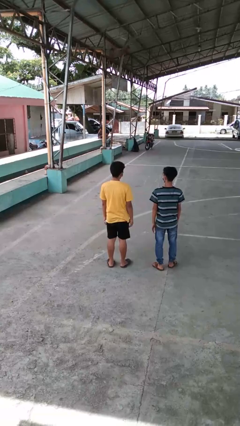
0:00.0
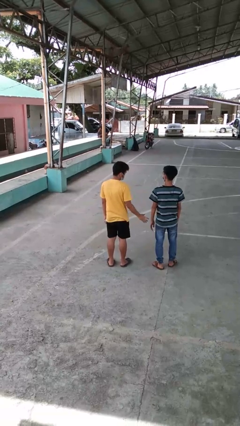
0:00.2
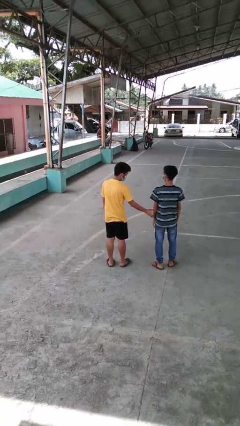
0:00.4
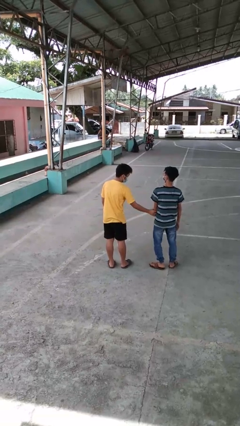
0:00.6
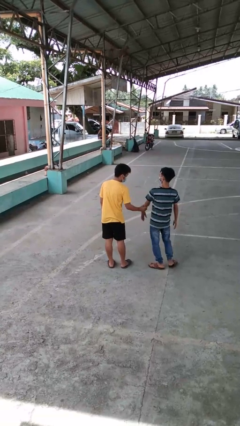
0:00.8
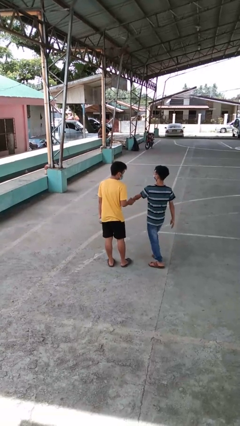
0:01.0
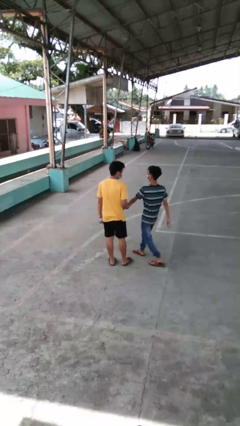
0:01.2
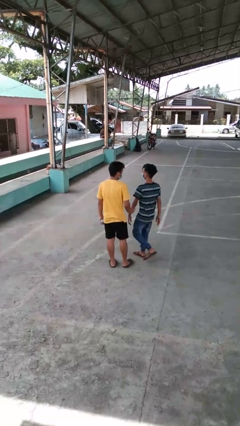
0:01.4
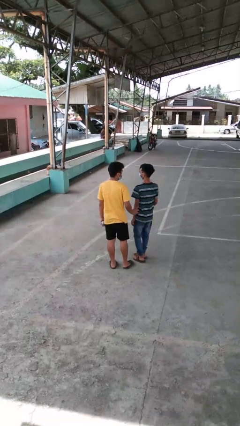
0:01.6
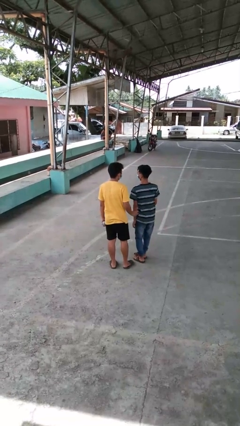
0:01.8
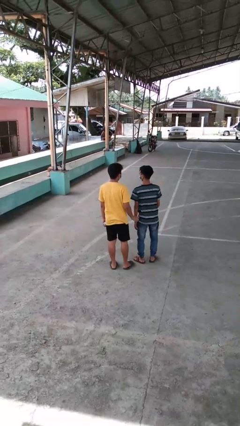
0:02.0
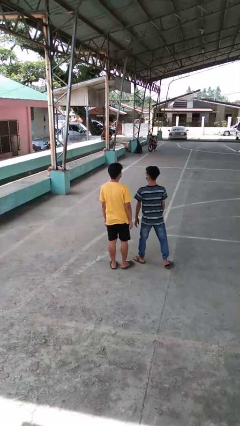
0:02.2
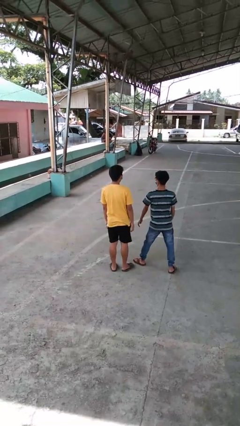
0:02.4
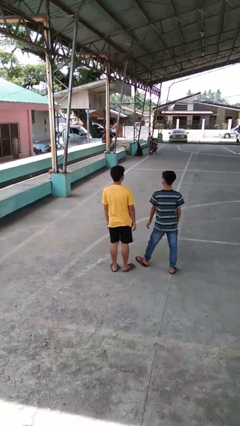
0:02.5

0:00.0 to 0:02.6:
person grabs person by forearm

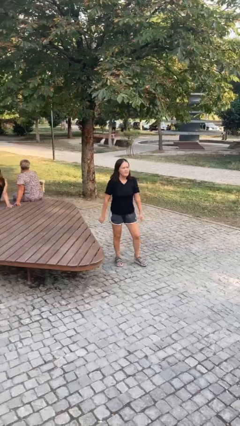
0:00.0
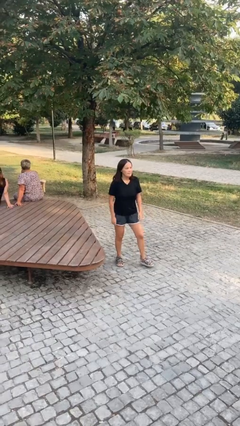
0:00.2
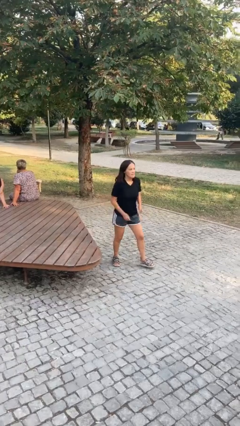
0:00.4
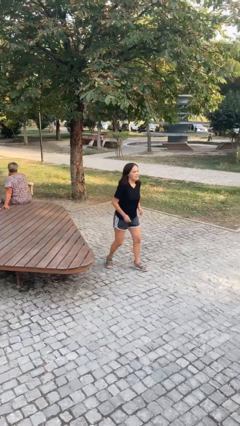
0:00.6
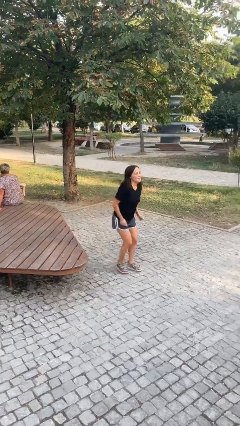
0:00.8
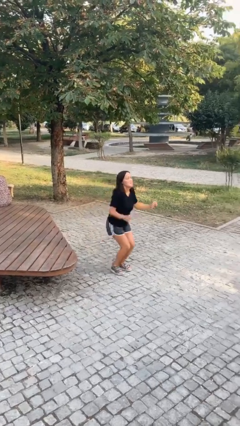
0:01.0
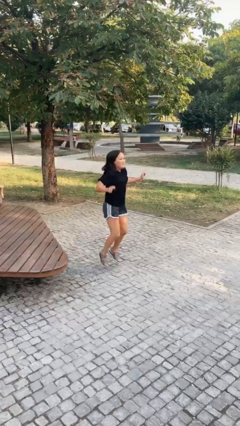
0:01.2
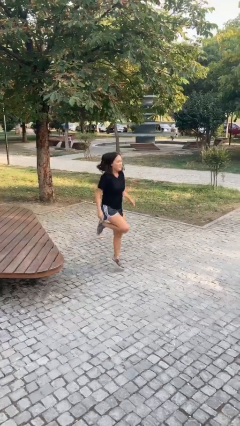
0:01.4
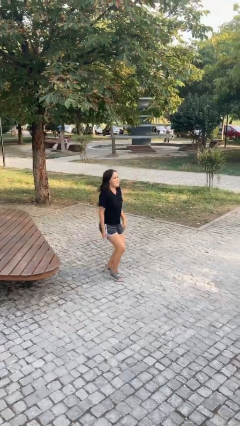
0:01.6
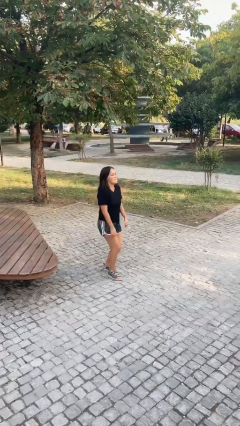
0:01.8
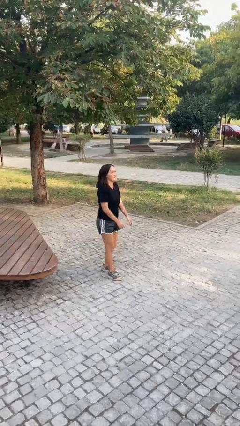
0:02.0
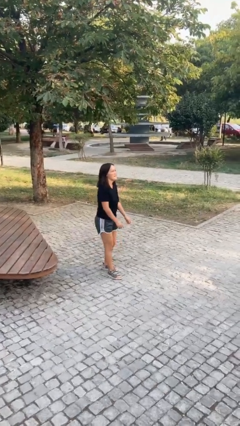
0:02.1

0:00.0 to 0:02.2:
person jumps

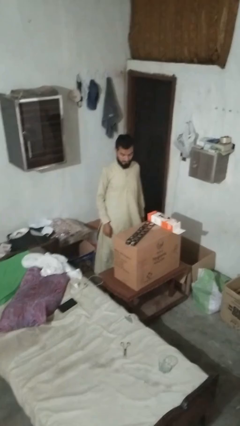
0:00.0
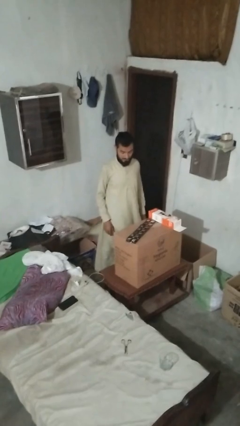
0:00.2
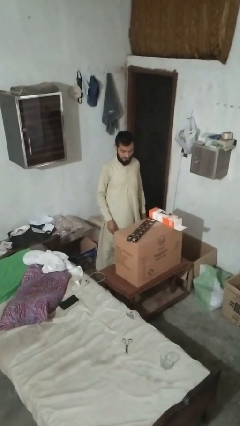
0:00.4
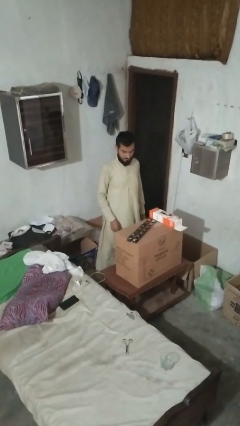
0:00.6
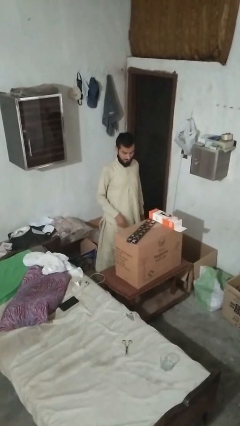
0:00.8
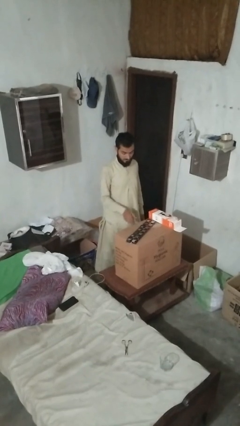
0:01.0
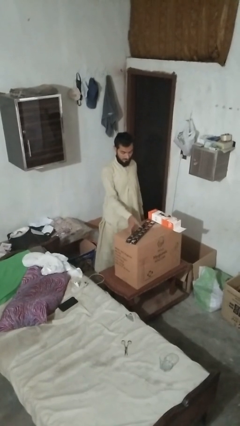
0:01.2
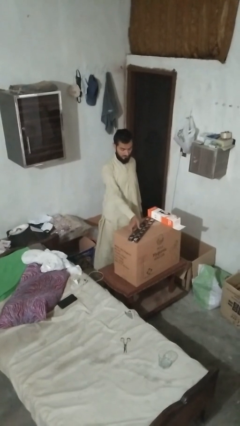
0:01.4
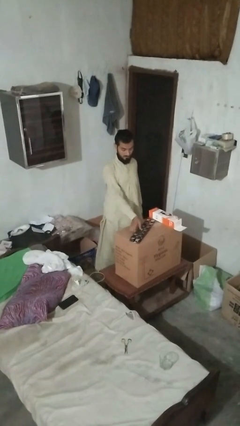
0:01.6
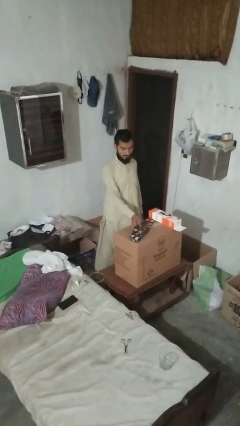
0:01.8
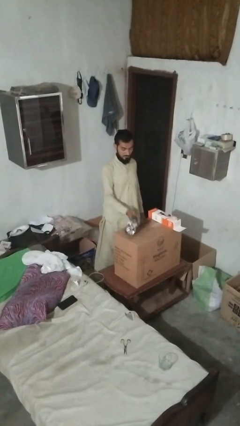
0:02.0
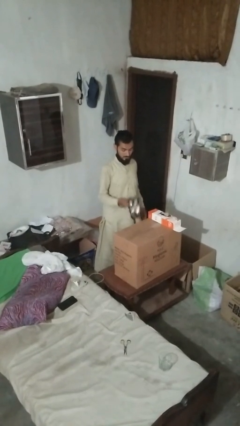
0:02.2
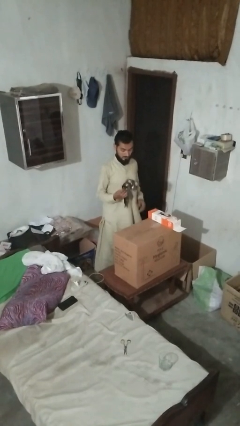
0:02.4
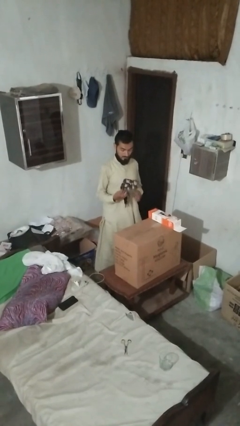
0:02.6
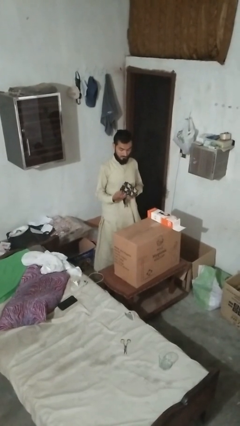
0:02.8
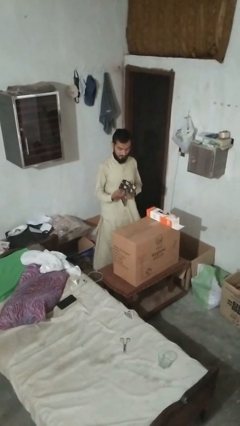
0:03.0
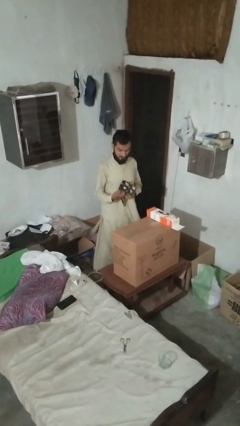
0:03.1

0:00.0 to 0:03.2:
person picks up object from countertop

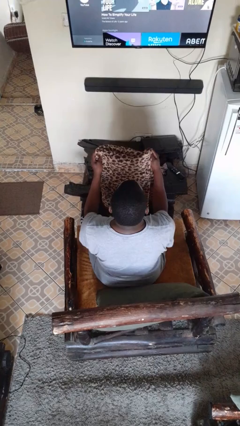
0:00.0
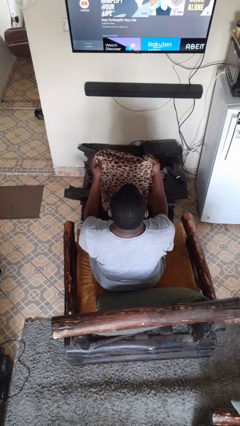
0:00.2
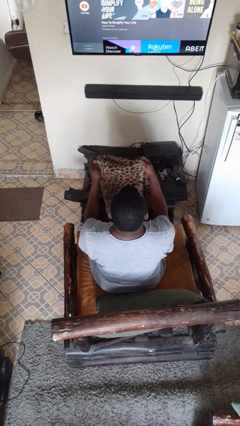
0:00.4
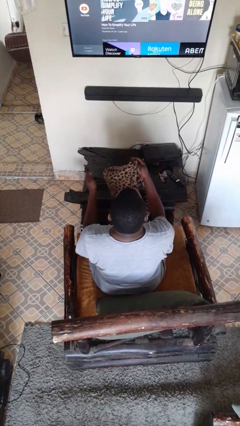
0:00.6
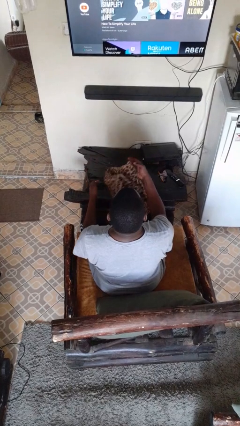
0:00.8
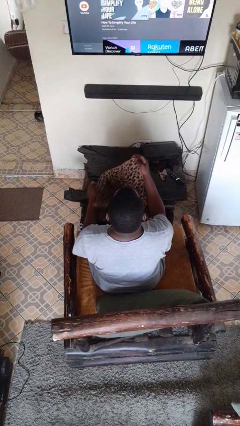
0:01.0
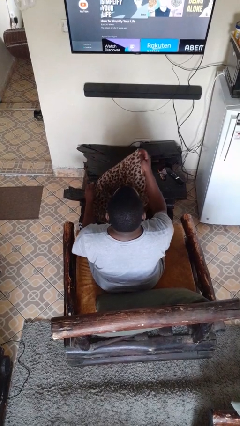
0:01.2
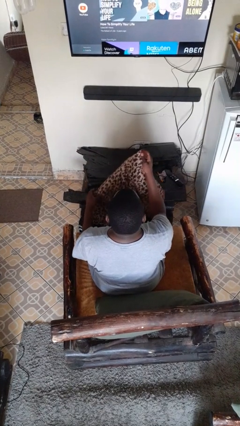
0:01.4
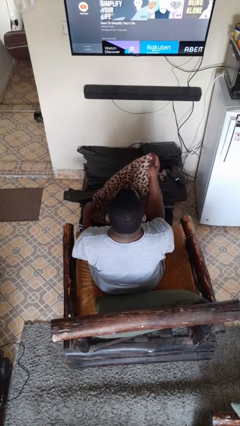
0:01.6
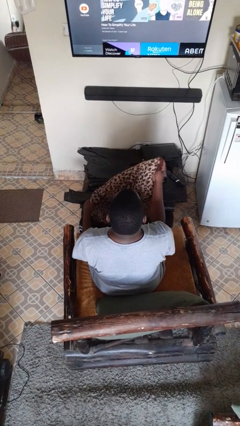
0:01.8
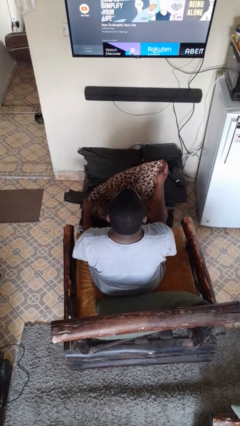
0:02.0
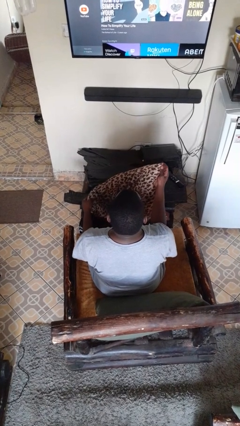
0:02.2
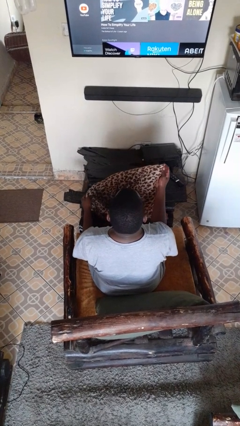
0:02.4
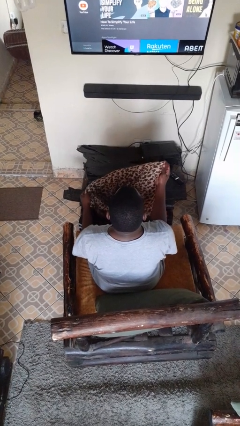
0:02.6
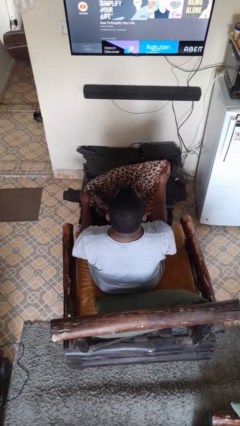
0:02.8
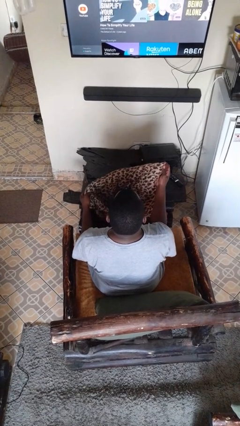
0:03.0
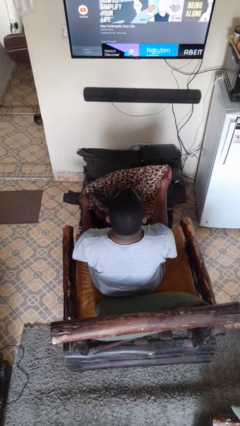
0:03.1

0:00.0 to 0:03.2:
person unfolds blanket

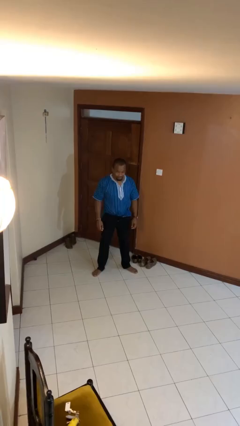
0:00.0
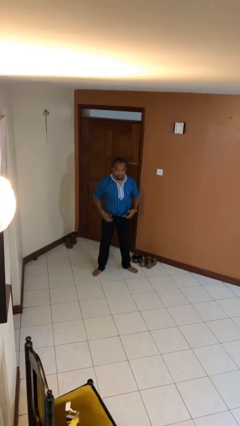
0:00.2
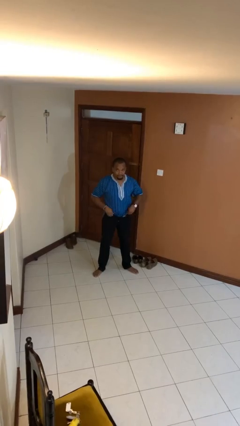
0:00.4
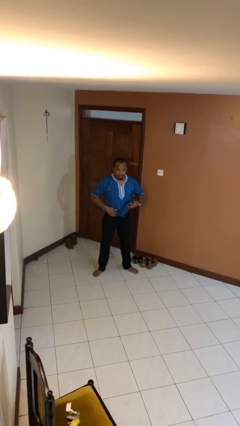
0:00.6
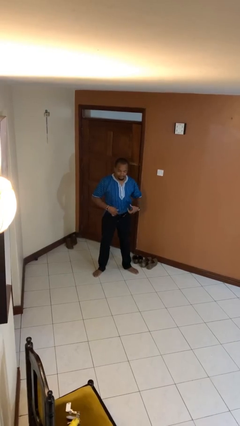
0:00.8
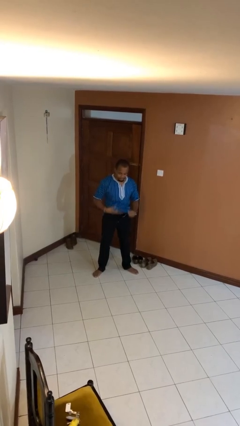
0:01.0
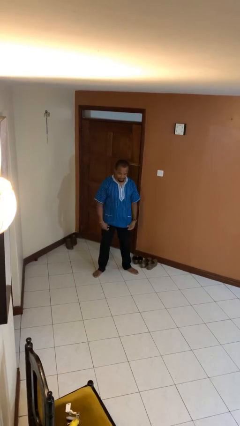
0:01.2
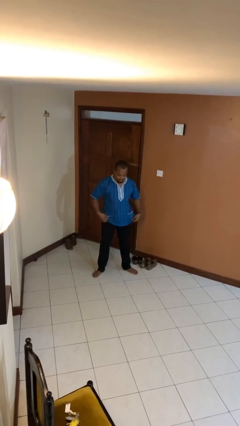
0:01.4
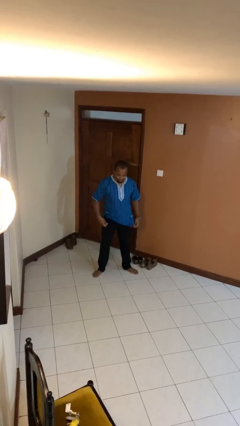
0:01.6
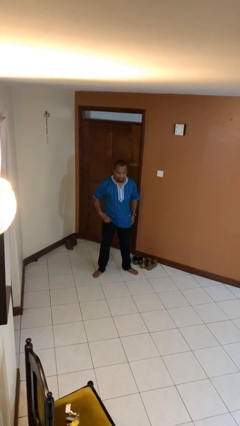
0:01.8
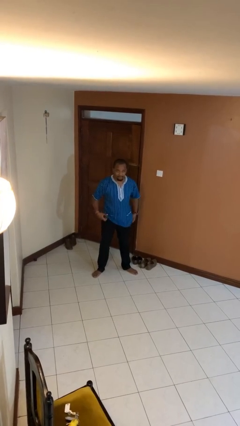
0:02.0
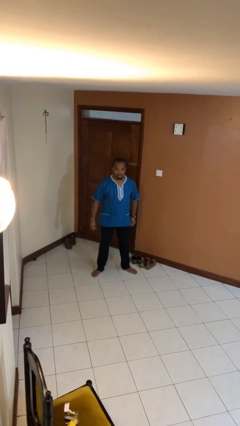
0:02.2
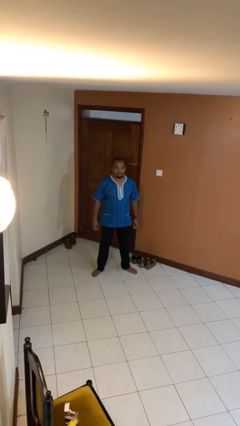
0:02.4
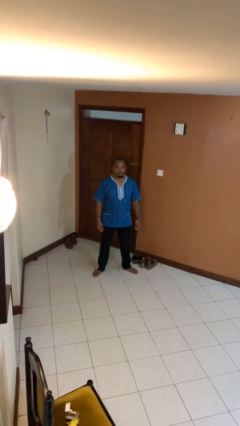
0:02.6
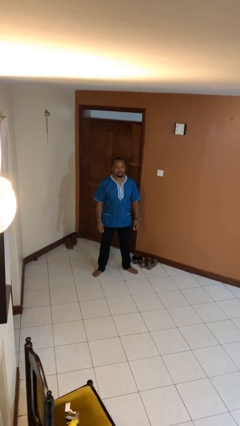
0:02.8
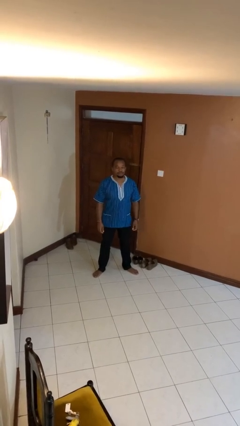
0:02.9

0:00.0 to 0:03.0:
person untucks shirt

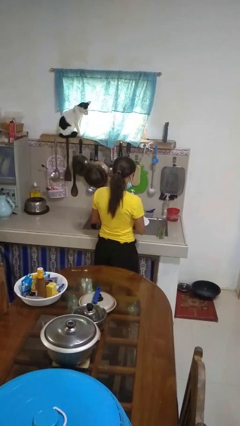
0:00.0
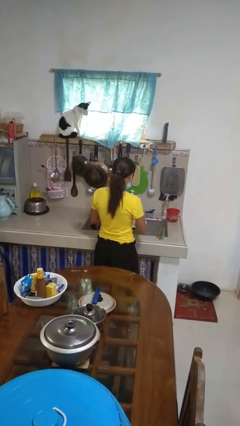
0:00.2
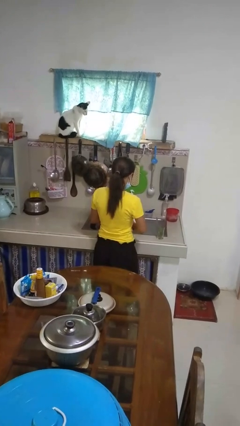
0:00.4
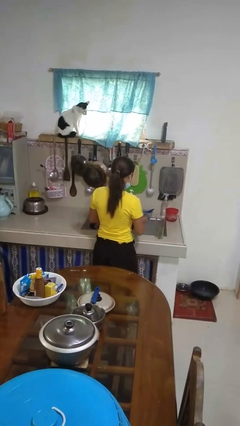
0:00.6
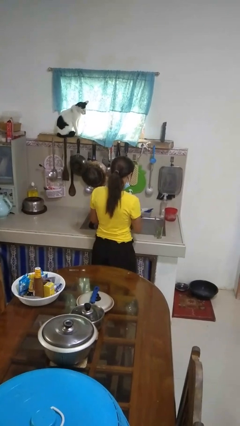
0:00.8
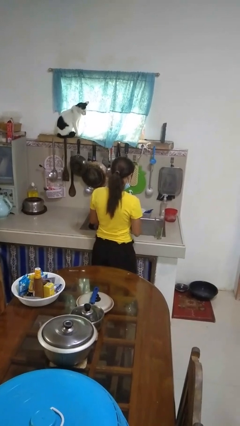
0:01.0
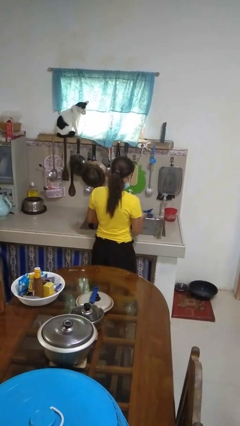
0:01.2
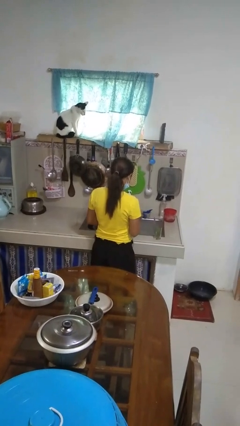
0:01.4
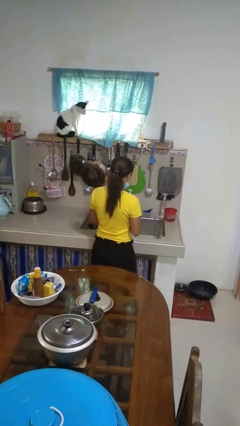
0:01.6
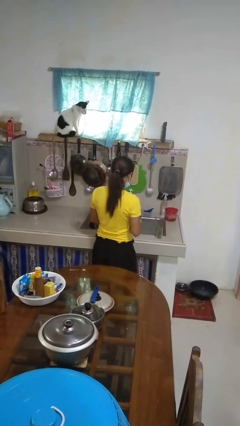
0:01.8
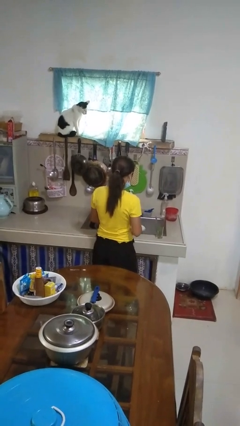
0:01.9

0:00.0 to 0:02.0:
person dries dish

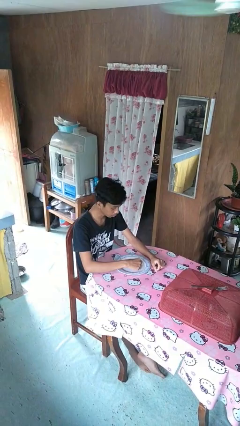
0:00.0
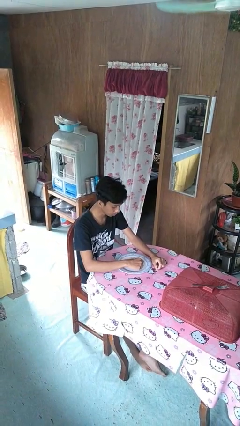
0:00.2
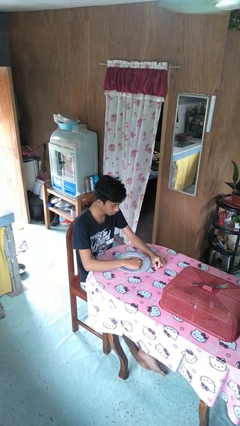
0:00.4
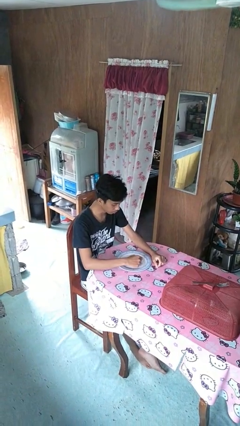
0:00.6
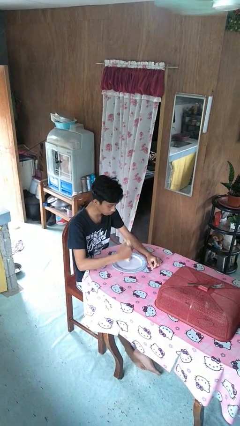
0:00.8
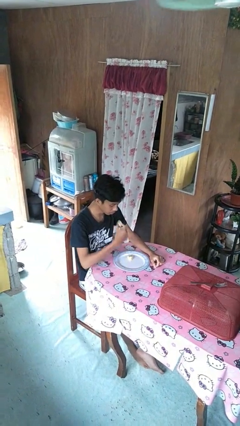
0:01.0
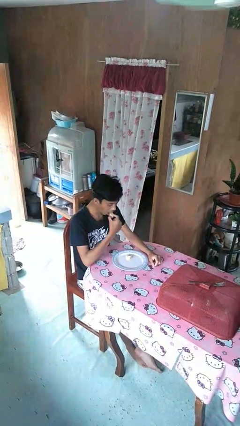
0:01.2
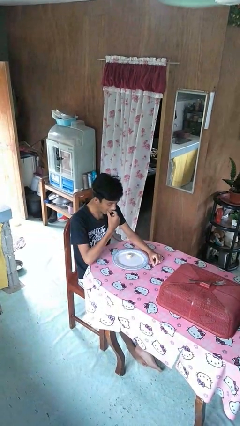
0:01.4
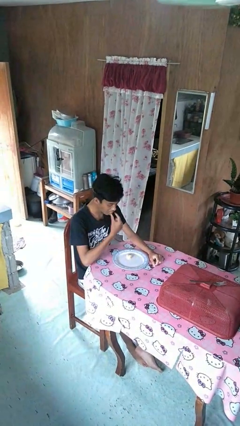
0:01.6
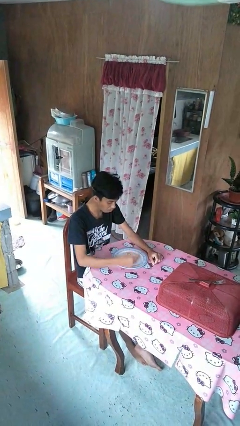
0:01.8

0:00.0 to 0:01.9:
person eats with hands
